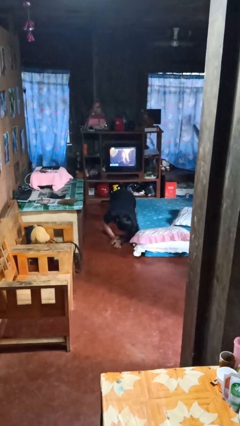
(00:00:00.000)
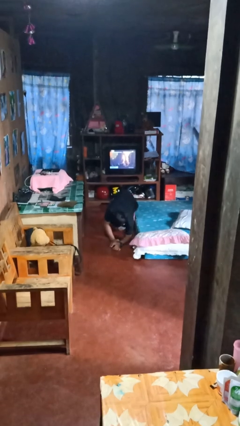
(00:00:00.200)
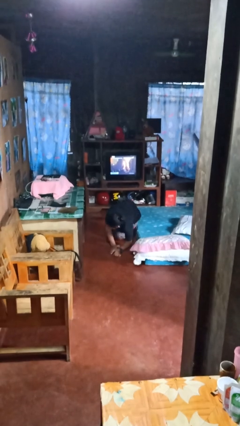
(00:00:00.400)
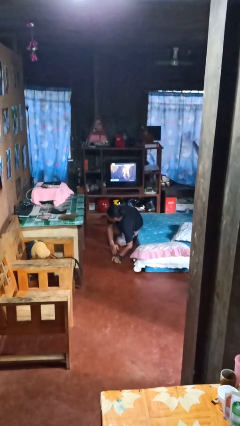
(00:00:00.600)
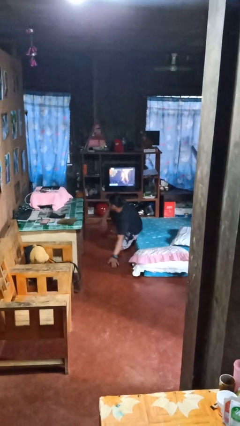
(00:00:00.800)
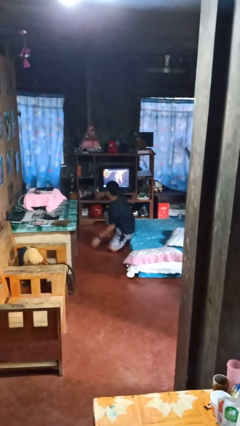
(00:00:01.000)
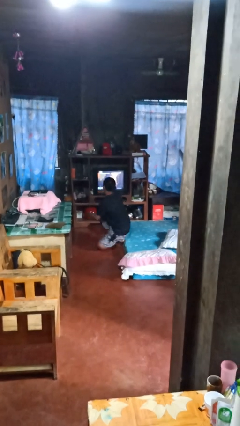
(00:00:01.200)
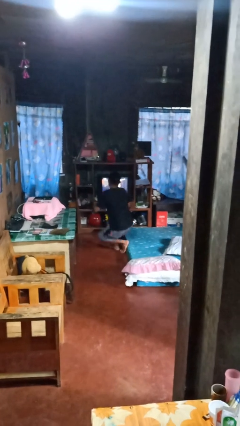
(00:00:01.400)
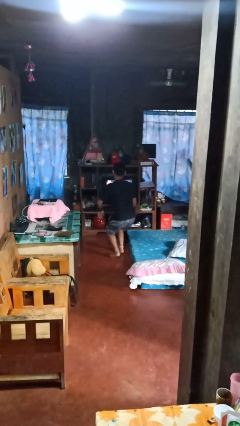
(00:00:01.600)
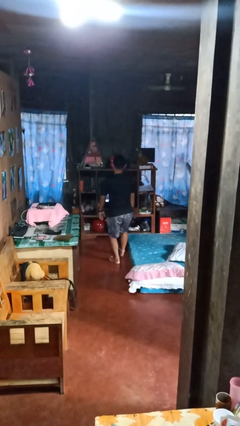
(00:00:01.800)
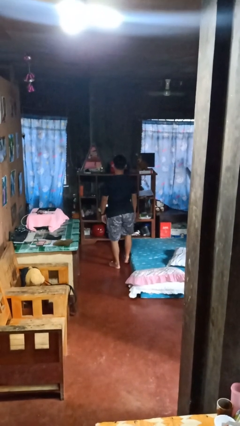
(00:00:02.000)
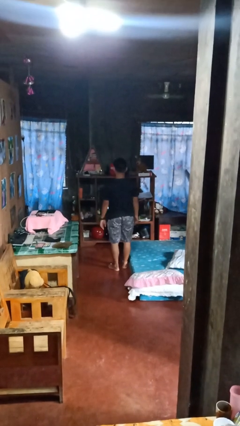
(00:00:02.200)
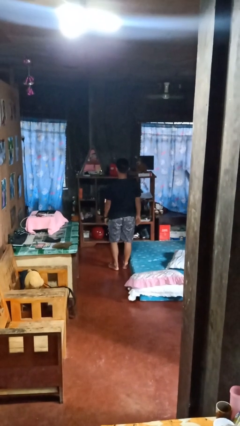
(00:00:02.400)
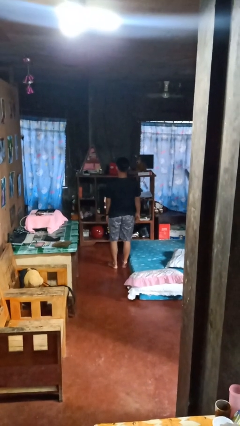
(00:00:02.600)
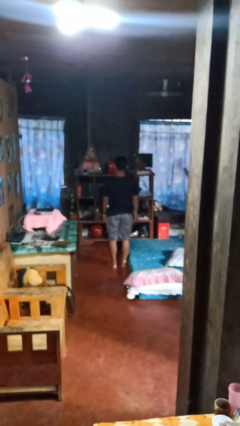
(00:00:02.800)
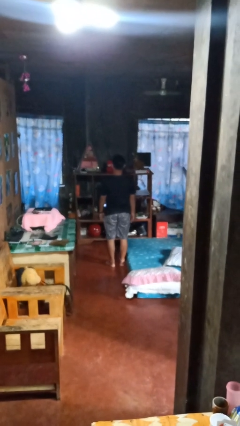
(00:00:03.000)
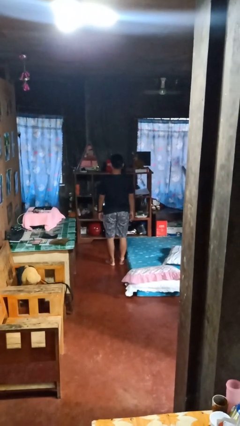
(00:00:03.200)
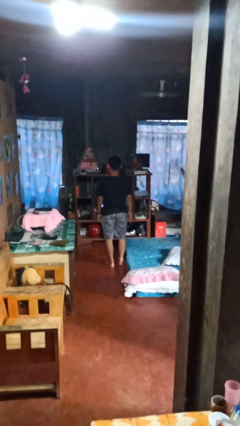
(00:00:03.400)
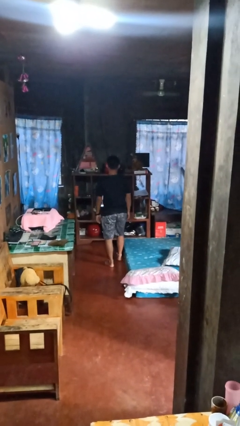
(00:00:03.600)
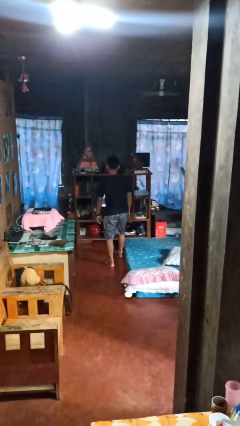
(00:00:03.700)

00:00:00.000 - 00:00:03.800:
person stands up from floor

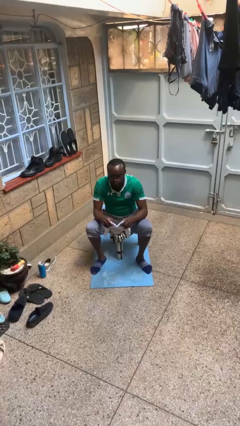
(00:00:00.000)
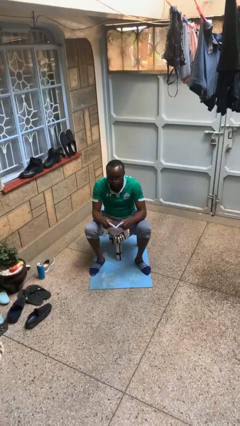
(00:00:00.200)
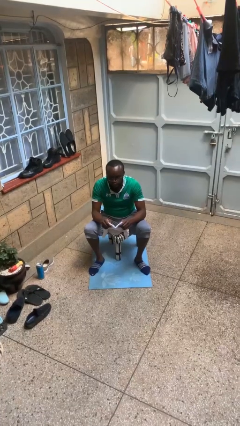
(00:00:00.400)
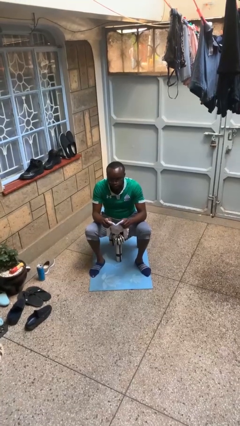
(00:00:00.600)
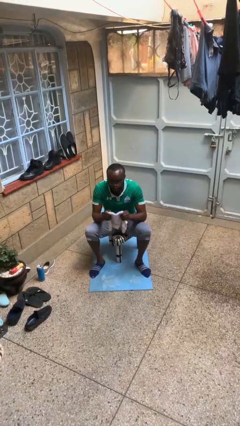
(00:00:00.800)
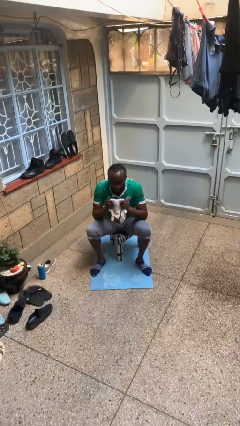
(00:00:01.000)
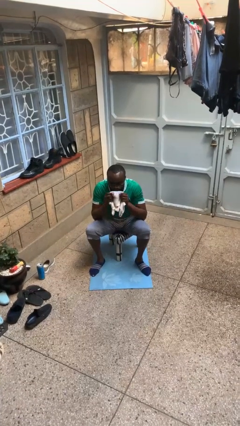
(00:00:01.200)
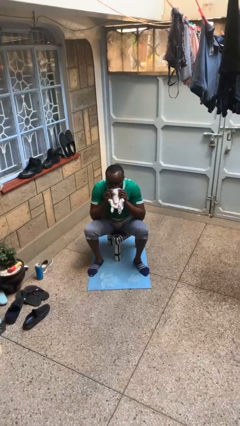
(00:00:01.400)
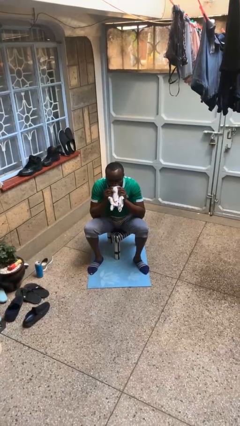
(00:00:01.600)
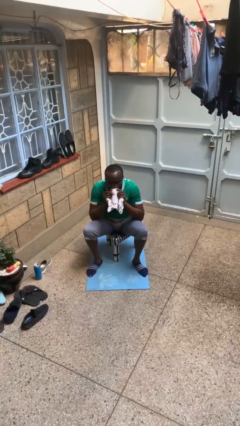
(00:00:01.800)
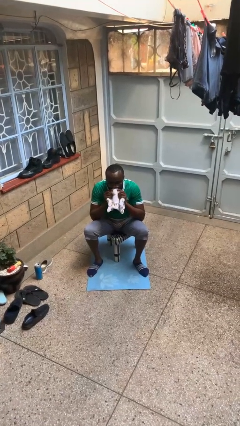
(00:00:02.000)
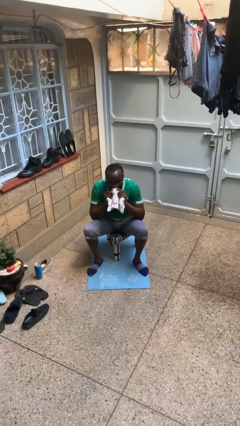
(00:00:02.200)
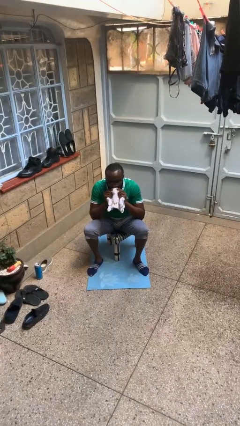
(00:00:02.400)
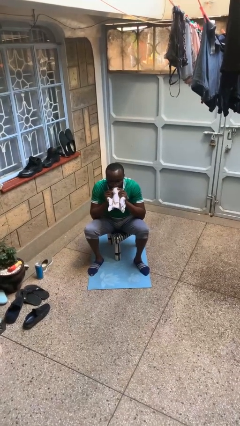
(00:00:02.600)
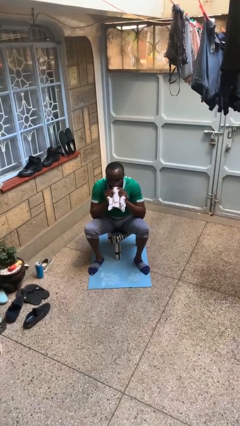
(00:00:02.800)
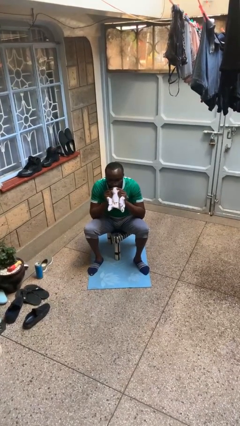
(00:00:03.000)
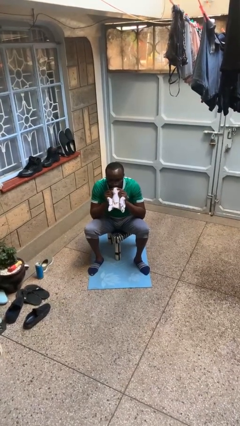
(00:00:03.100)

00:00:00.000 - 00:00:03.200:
person wipes mouth with napkin

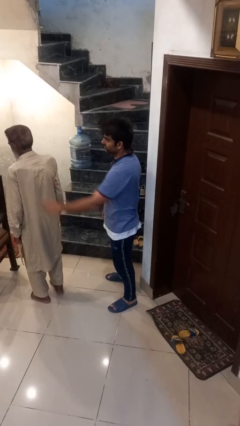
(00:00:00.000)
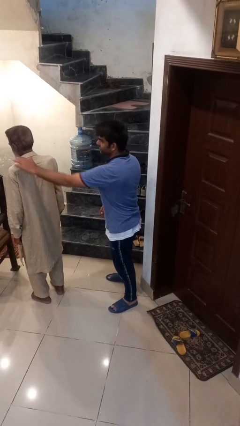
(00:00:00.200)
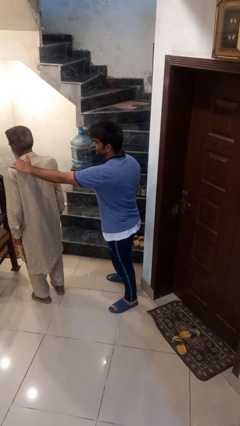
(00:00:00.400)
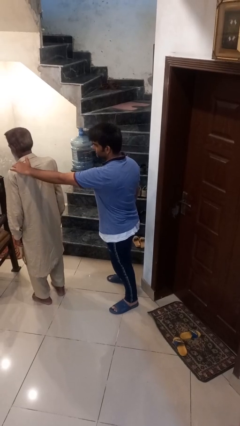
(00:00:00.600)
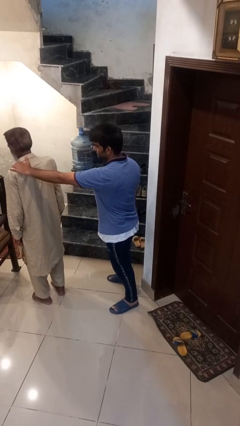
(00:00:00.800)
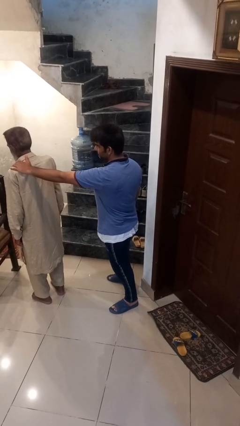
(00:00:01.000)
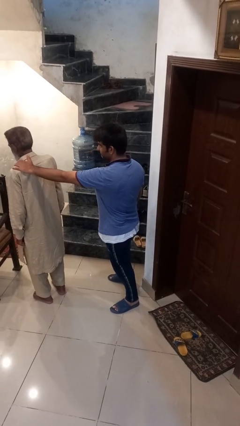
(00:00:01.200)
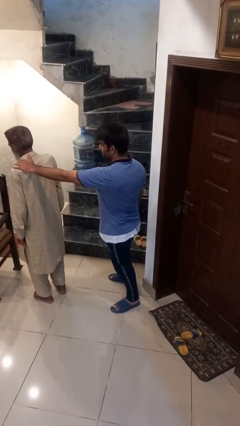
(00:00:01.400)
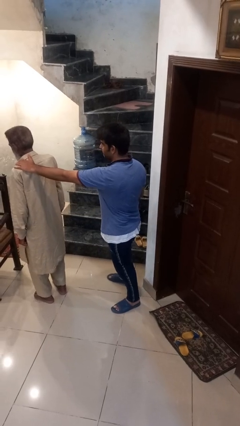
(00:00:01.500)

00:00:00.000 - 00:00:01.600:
person grabs person by shoulder

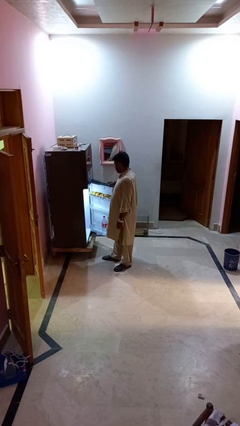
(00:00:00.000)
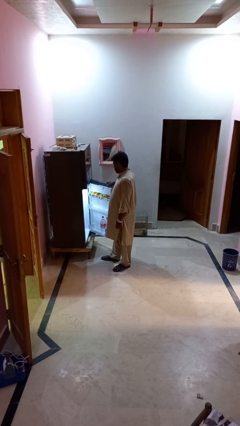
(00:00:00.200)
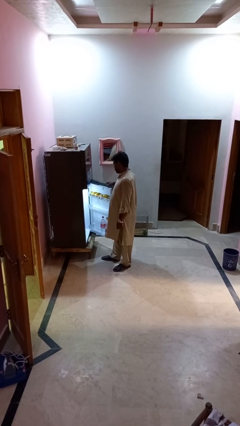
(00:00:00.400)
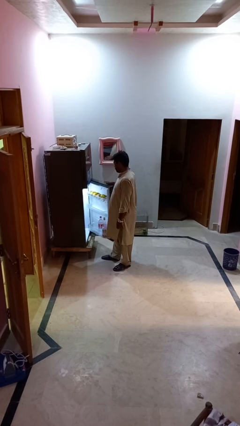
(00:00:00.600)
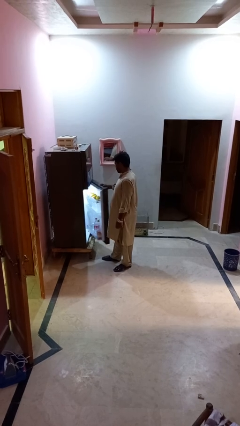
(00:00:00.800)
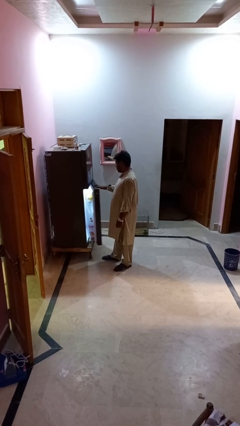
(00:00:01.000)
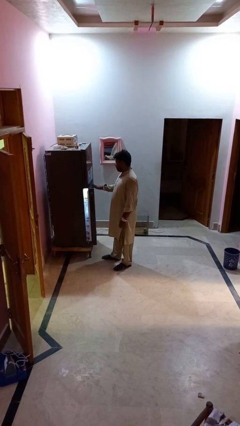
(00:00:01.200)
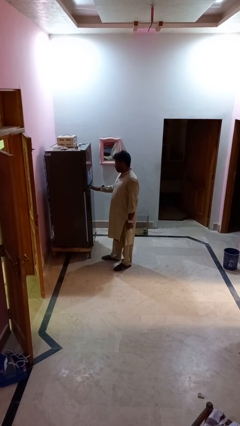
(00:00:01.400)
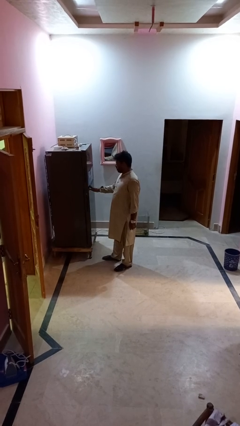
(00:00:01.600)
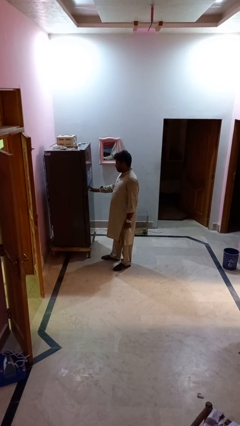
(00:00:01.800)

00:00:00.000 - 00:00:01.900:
person closes refrigerator

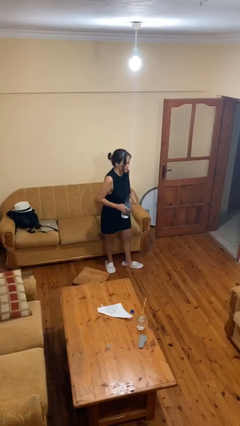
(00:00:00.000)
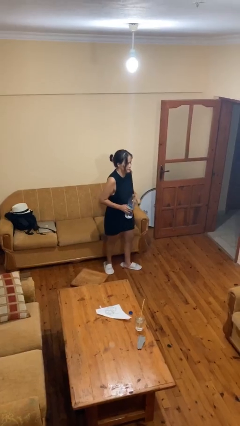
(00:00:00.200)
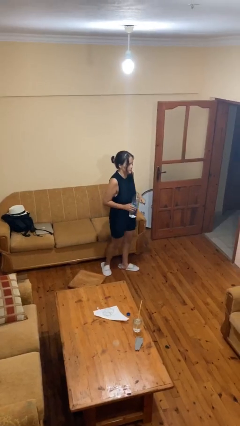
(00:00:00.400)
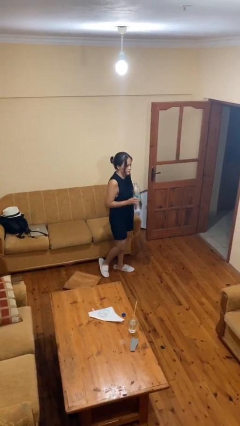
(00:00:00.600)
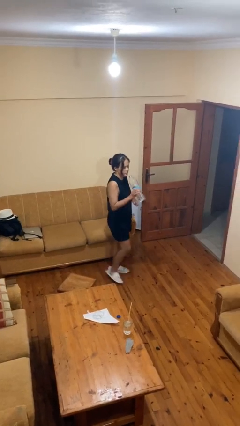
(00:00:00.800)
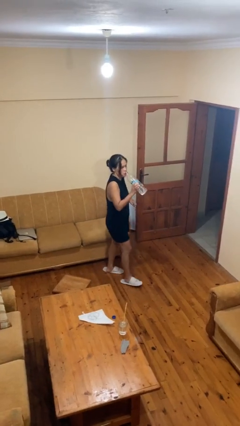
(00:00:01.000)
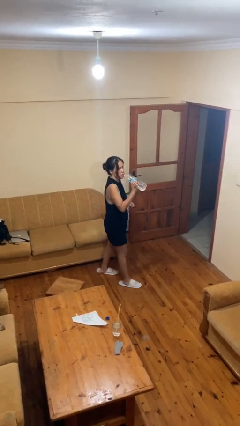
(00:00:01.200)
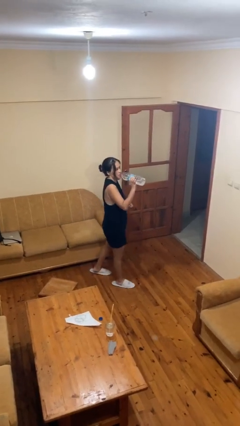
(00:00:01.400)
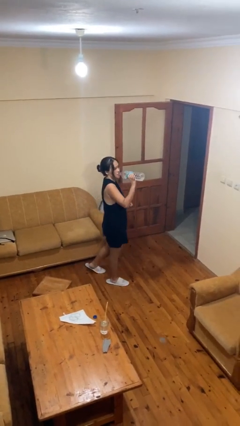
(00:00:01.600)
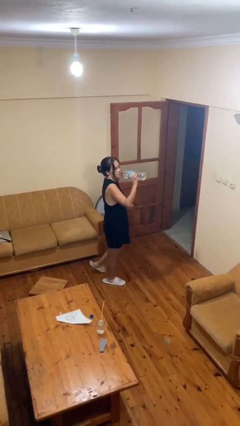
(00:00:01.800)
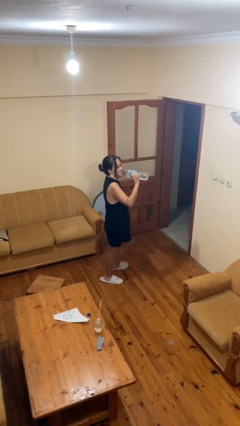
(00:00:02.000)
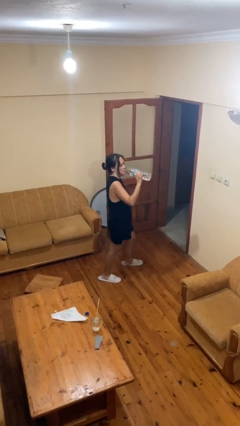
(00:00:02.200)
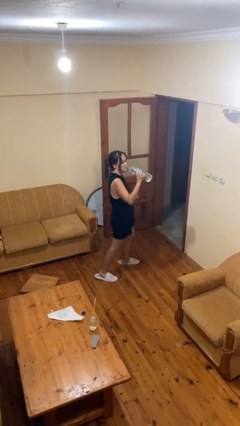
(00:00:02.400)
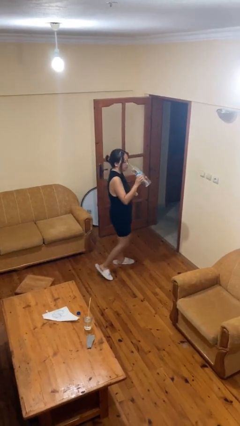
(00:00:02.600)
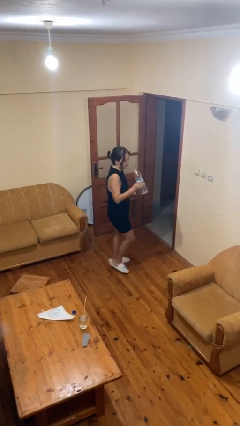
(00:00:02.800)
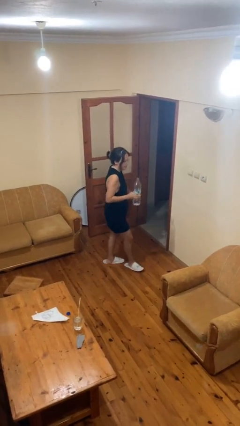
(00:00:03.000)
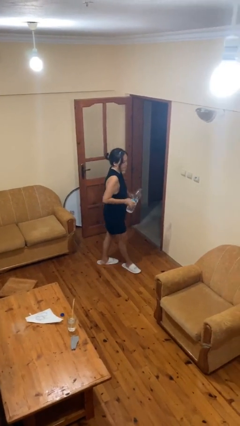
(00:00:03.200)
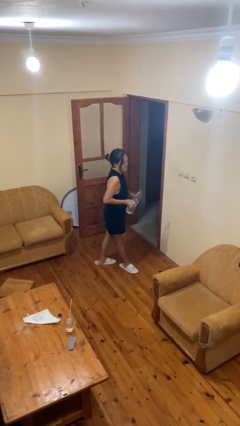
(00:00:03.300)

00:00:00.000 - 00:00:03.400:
person drinks from bottle

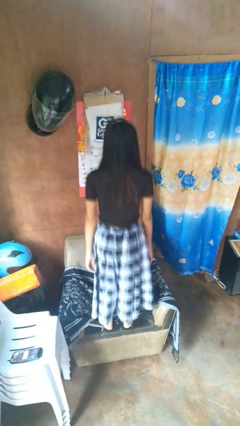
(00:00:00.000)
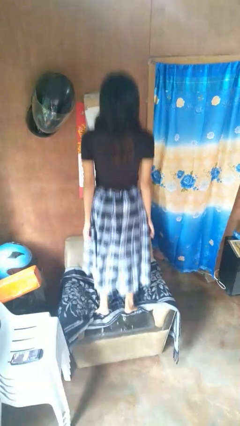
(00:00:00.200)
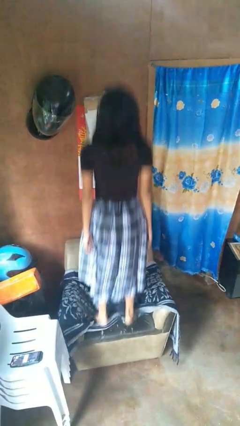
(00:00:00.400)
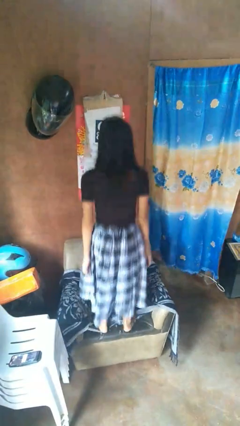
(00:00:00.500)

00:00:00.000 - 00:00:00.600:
person jumps on couch

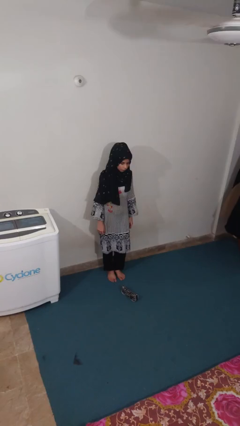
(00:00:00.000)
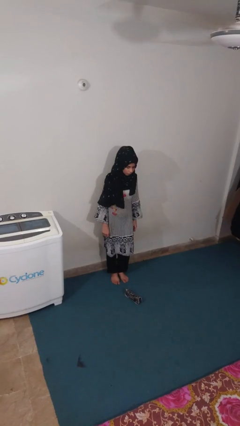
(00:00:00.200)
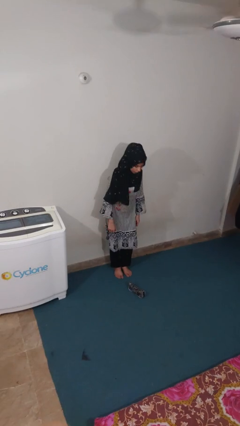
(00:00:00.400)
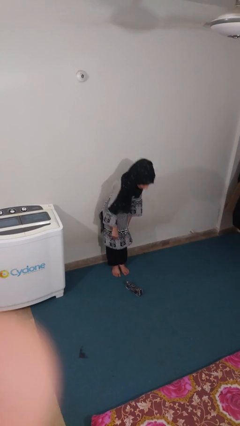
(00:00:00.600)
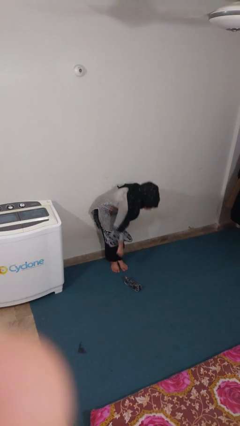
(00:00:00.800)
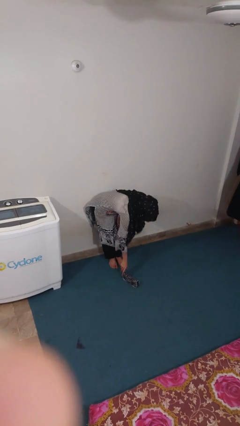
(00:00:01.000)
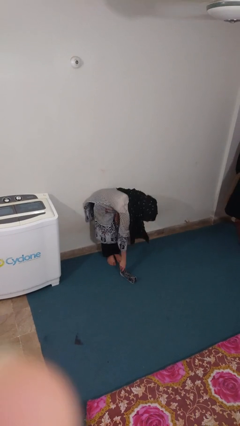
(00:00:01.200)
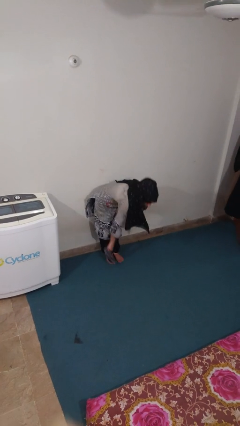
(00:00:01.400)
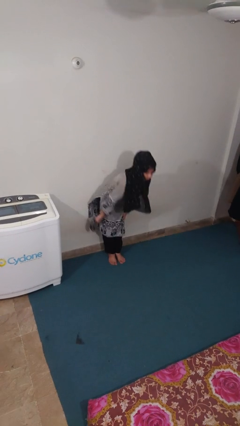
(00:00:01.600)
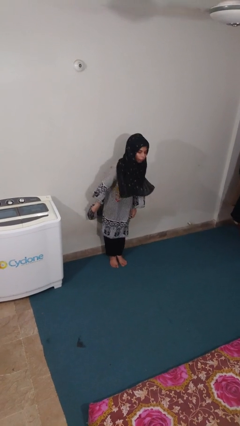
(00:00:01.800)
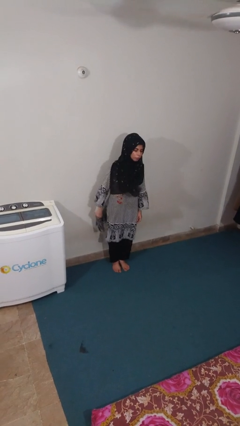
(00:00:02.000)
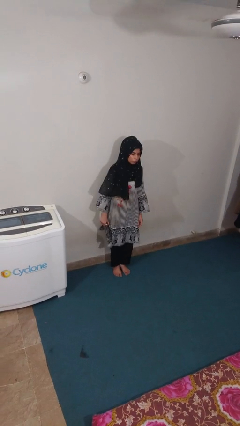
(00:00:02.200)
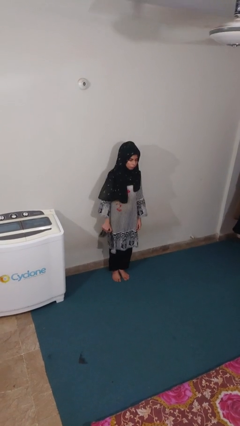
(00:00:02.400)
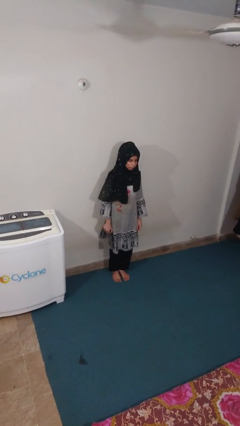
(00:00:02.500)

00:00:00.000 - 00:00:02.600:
person picks up object from floor
